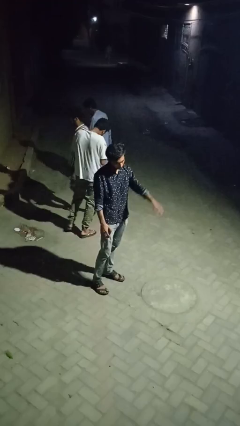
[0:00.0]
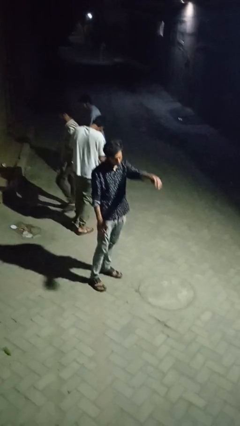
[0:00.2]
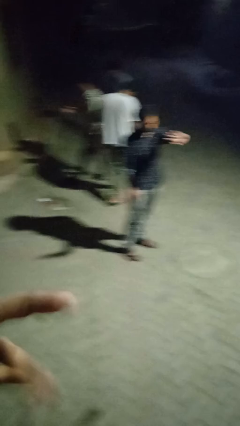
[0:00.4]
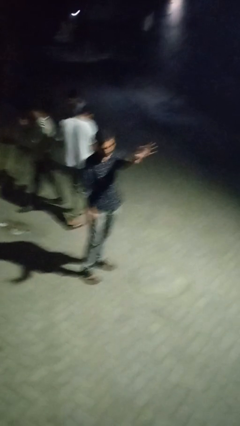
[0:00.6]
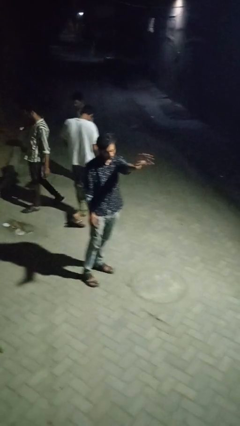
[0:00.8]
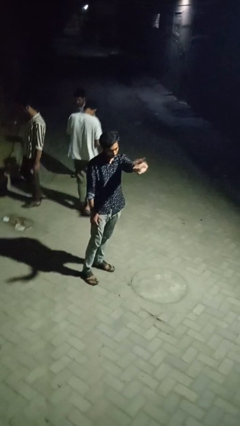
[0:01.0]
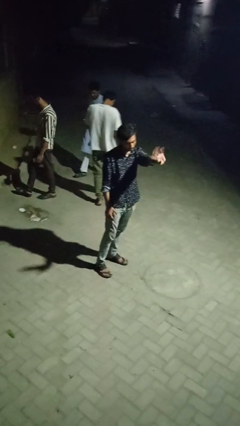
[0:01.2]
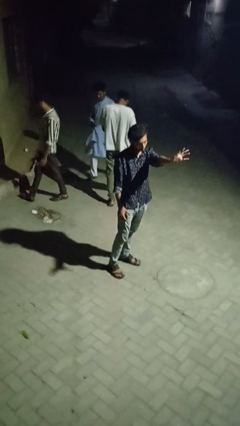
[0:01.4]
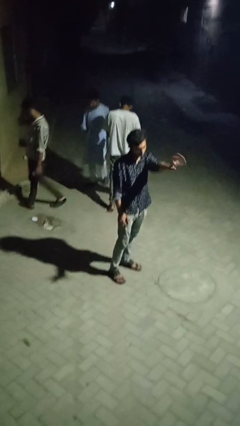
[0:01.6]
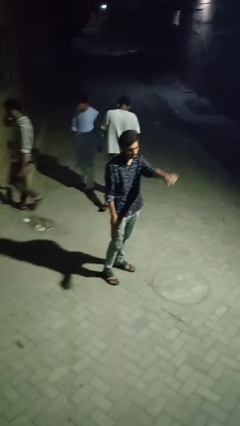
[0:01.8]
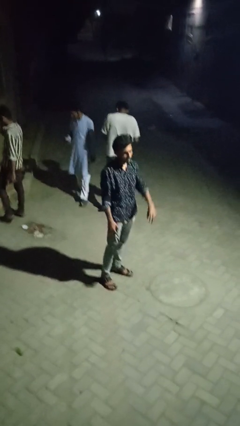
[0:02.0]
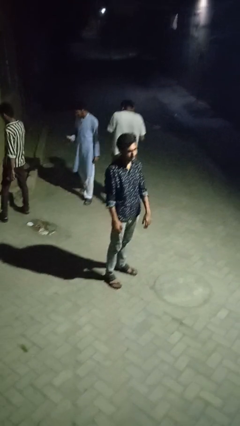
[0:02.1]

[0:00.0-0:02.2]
person waves at person

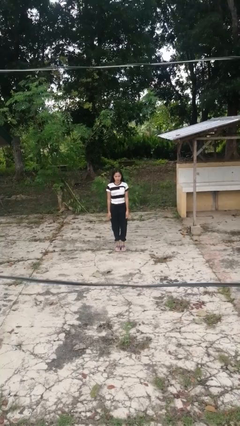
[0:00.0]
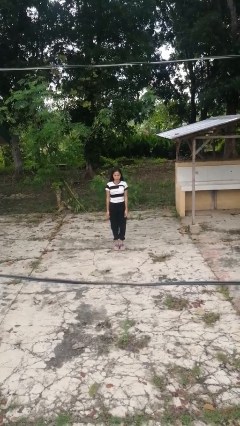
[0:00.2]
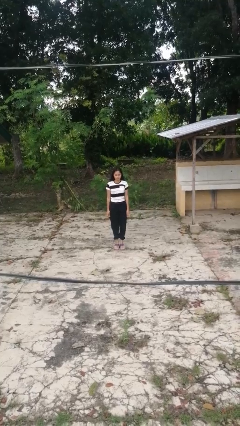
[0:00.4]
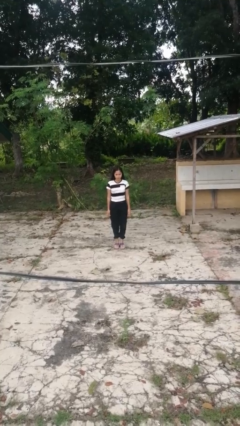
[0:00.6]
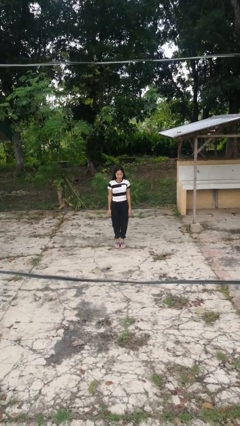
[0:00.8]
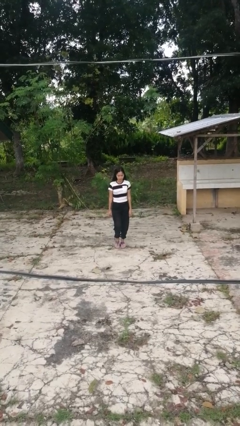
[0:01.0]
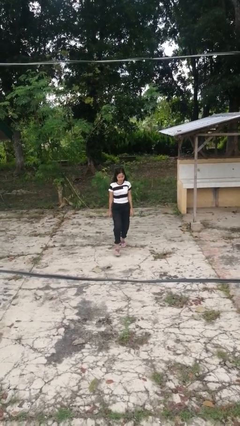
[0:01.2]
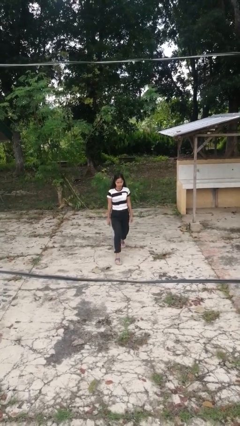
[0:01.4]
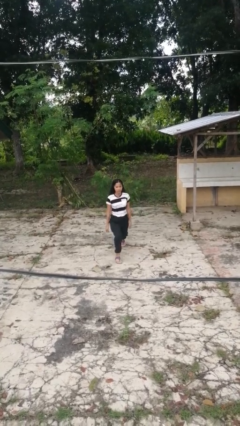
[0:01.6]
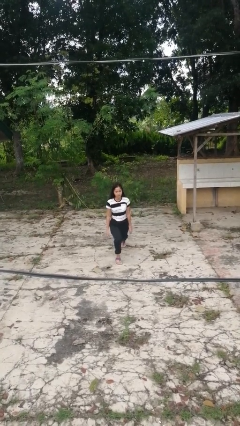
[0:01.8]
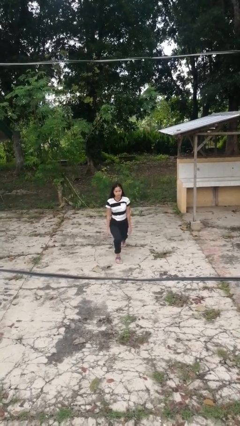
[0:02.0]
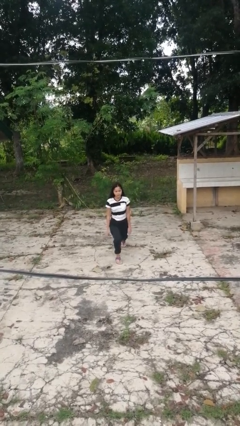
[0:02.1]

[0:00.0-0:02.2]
person exercises with lunges

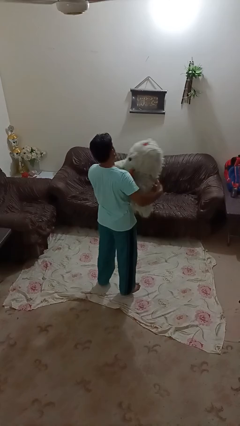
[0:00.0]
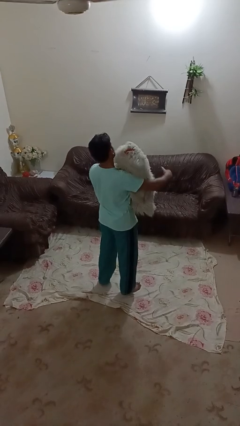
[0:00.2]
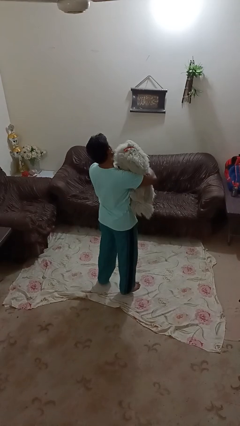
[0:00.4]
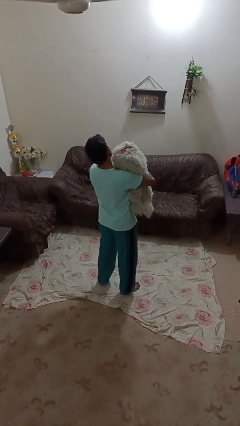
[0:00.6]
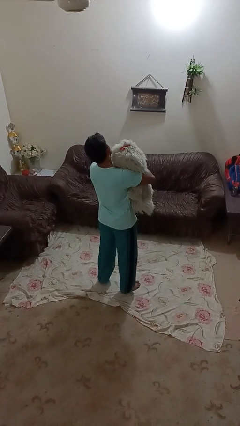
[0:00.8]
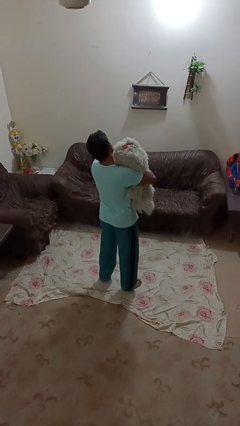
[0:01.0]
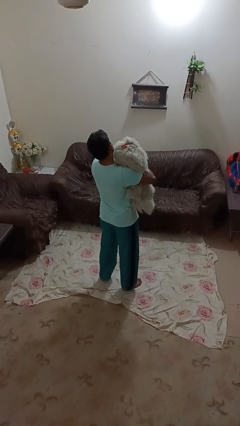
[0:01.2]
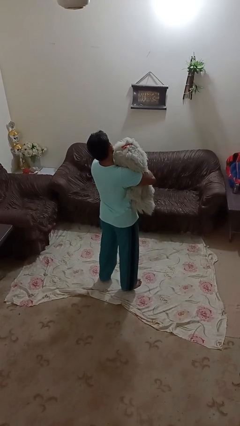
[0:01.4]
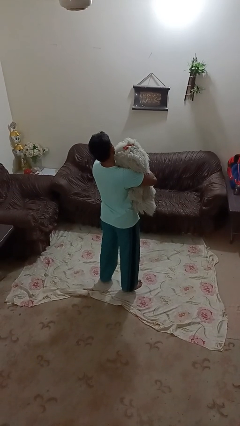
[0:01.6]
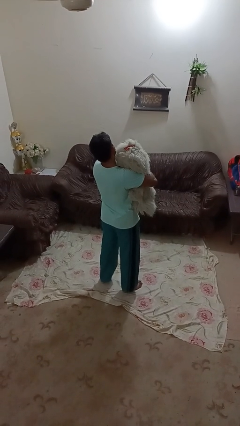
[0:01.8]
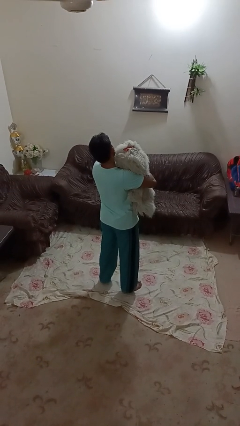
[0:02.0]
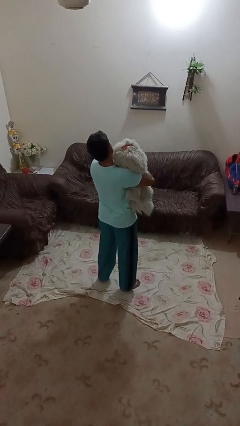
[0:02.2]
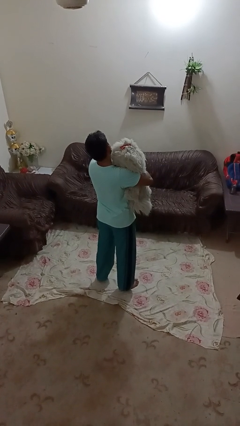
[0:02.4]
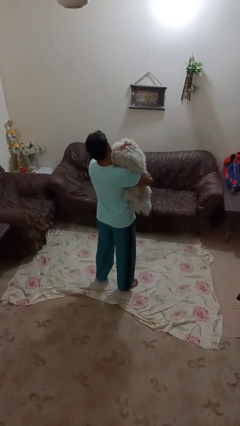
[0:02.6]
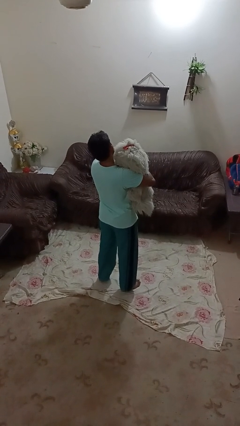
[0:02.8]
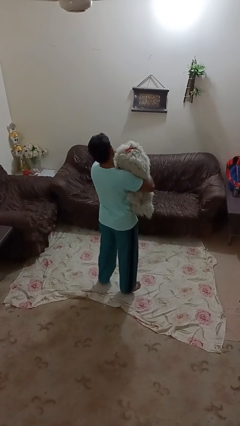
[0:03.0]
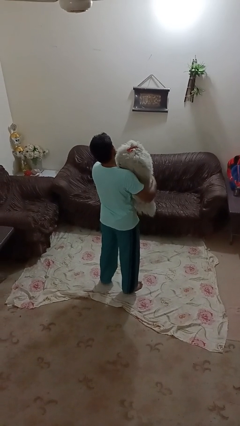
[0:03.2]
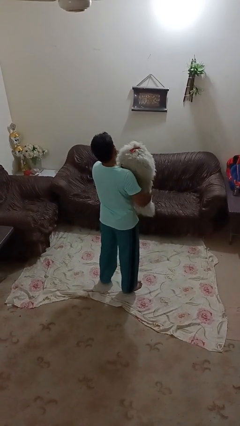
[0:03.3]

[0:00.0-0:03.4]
person hugs stuffed animal

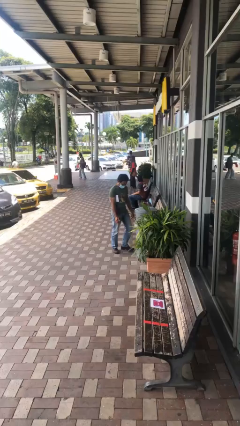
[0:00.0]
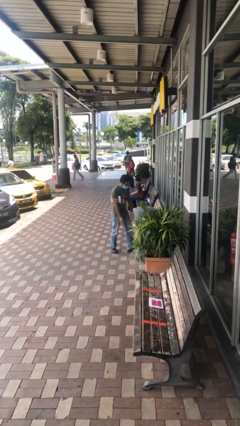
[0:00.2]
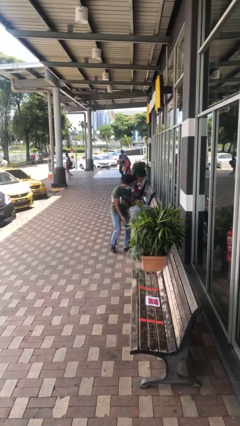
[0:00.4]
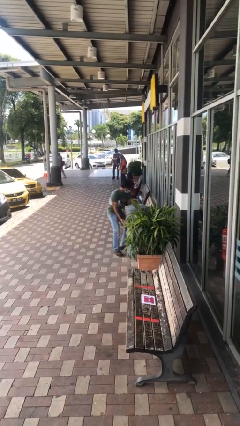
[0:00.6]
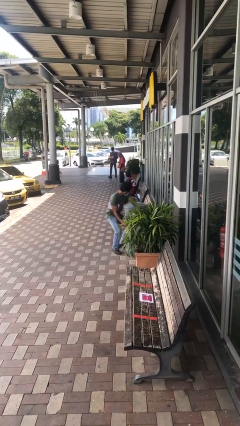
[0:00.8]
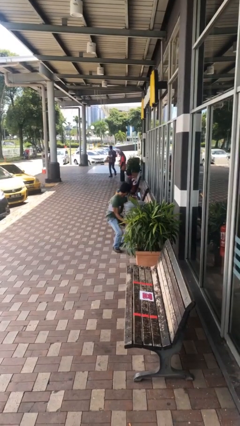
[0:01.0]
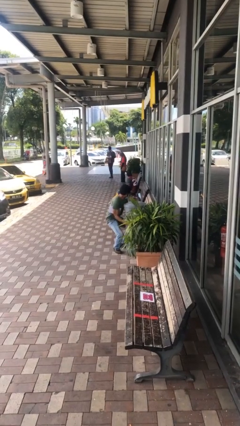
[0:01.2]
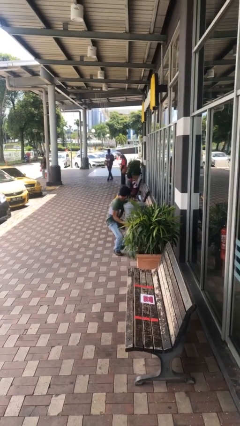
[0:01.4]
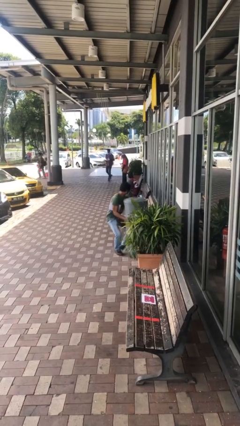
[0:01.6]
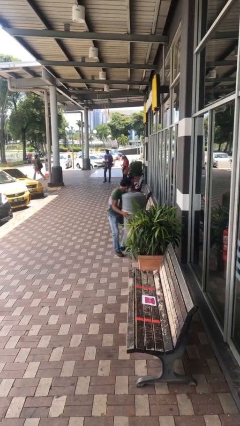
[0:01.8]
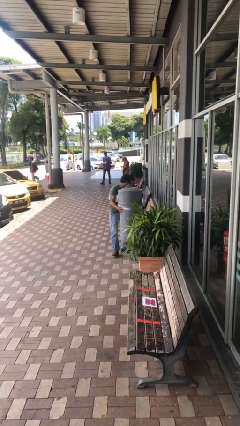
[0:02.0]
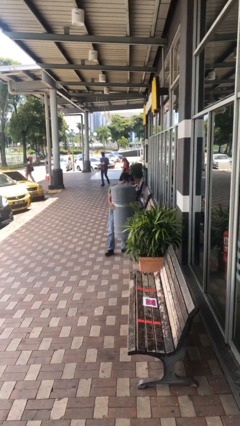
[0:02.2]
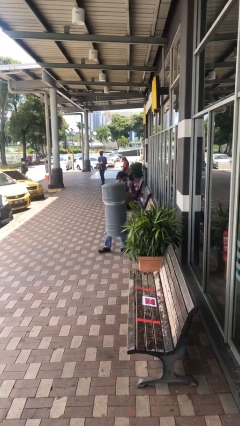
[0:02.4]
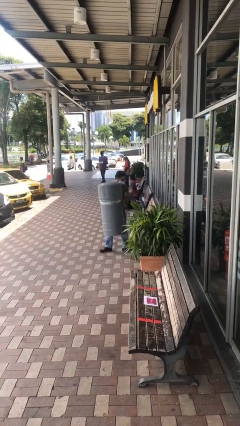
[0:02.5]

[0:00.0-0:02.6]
person picks up object from floor

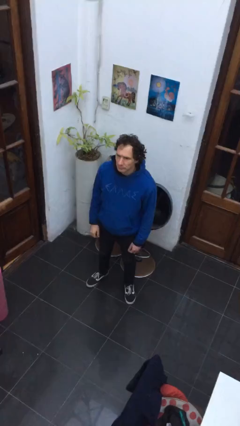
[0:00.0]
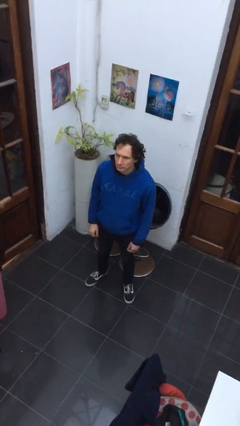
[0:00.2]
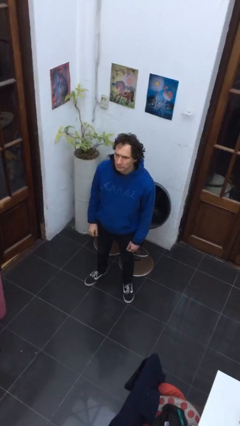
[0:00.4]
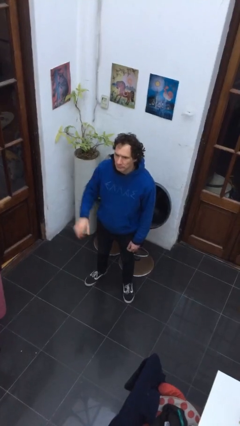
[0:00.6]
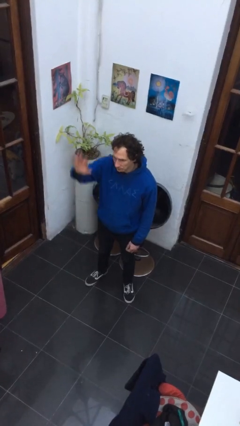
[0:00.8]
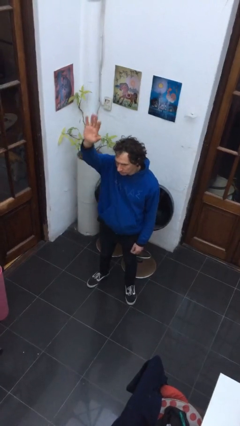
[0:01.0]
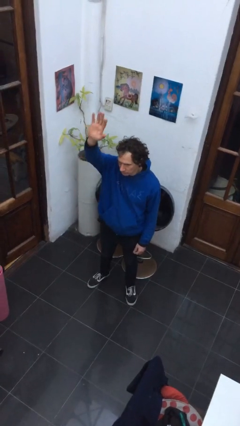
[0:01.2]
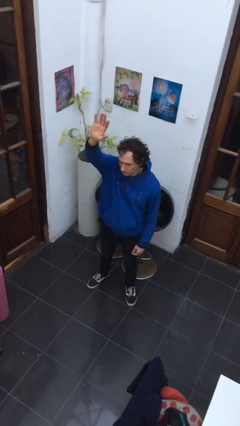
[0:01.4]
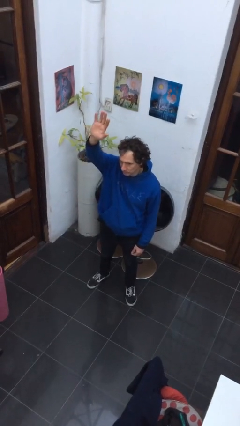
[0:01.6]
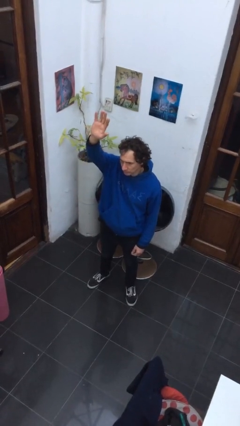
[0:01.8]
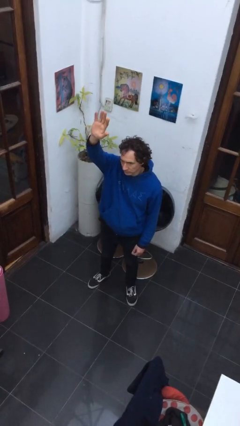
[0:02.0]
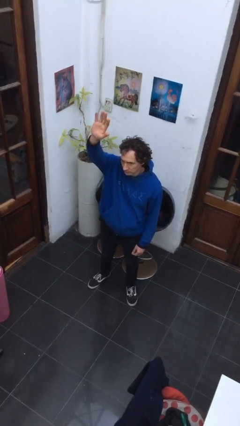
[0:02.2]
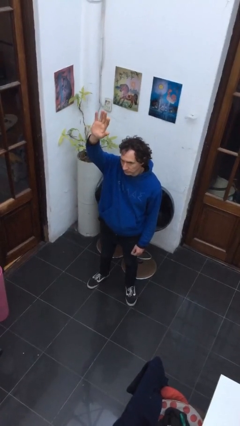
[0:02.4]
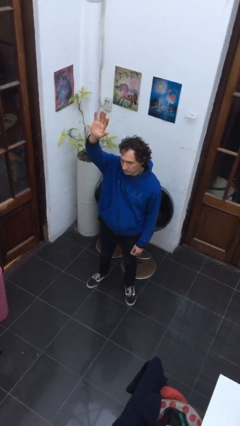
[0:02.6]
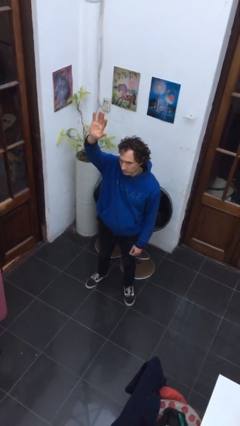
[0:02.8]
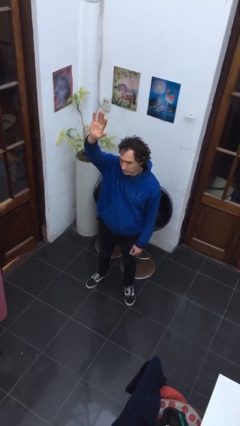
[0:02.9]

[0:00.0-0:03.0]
person gestures raise hand

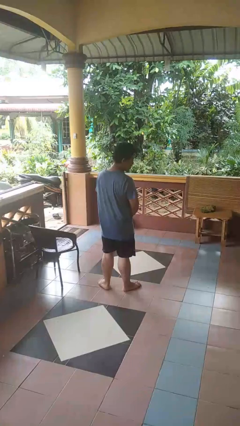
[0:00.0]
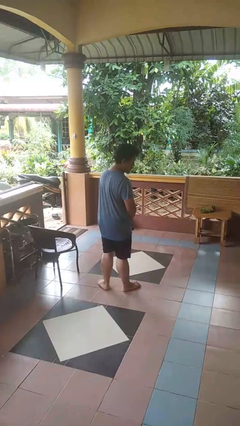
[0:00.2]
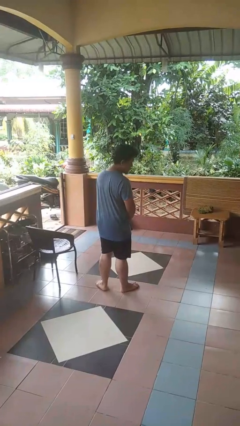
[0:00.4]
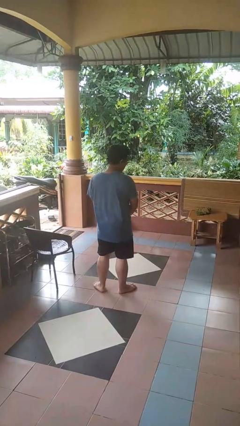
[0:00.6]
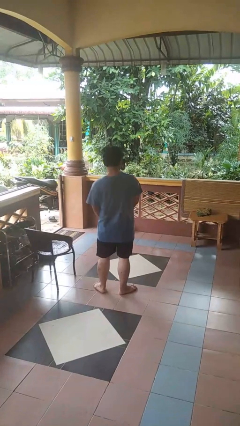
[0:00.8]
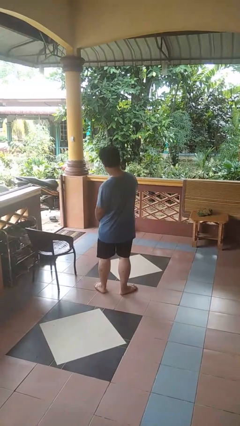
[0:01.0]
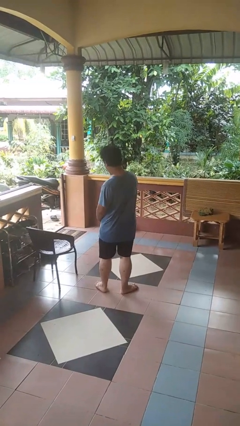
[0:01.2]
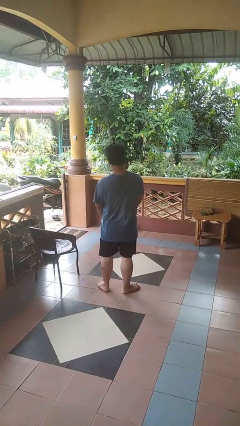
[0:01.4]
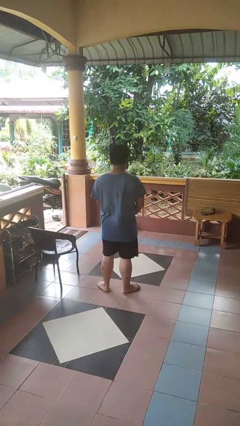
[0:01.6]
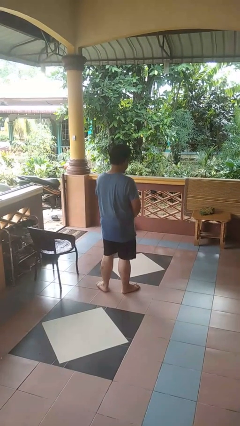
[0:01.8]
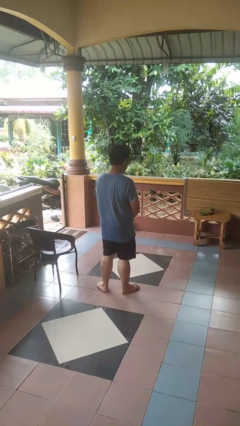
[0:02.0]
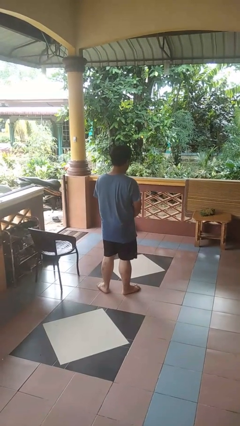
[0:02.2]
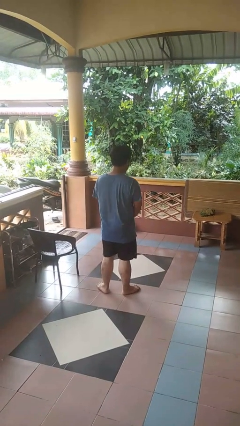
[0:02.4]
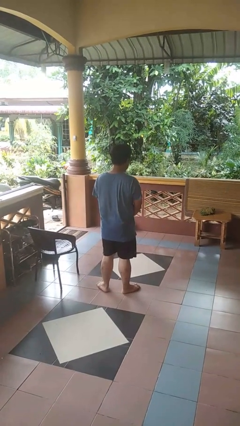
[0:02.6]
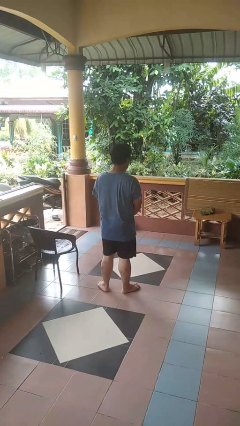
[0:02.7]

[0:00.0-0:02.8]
person twirls

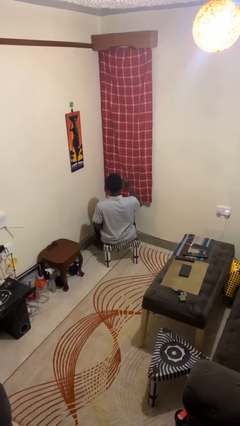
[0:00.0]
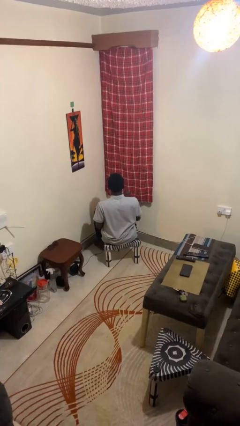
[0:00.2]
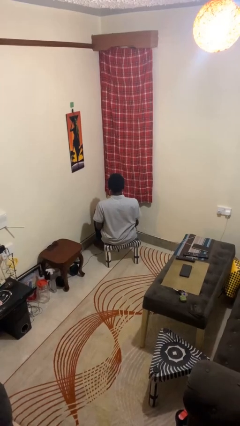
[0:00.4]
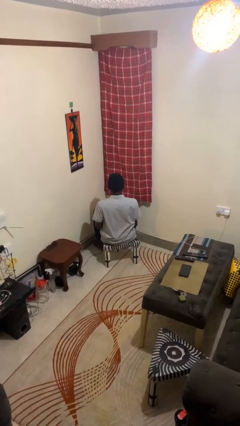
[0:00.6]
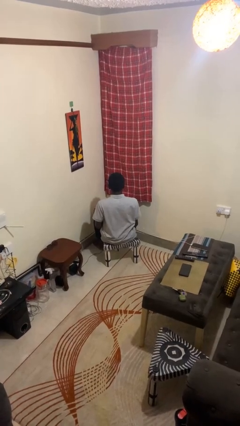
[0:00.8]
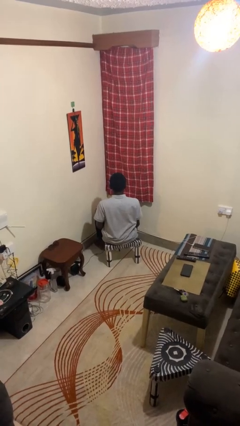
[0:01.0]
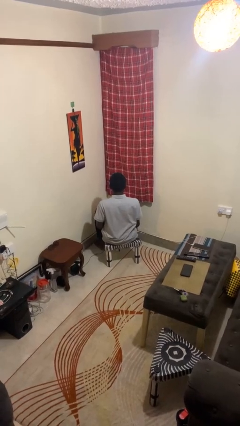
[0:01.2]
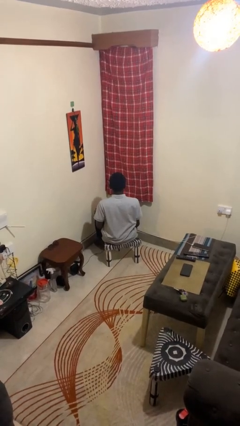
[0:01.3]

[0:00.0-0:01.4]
person gestures lower hand
